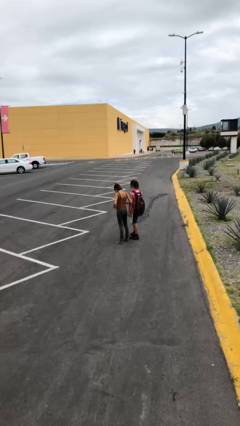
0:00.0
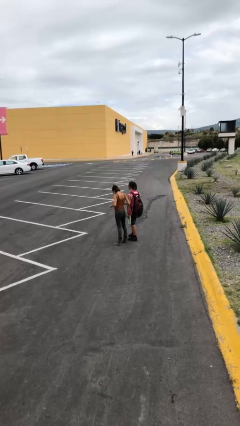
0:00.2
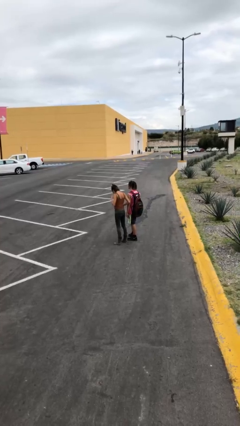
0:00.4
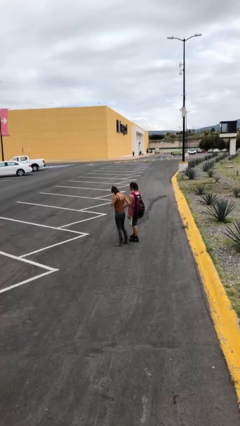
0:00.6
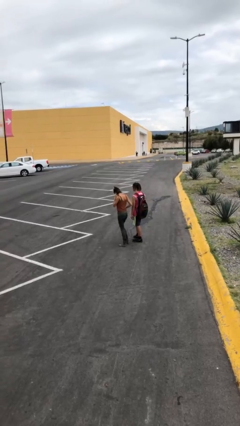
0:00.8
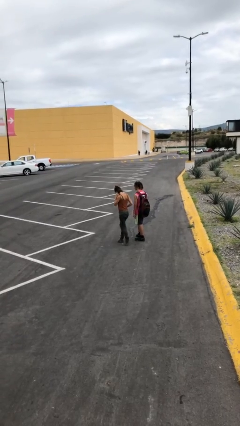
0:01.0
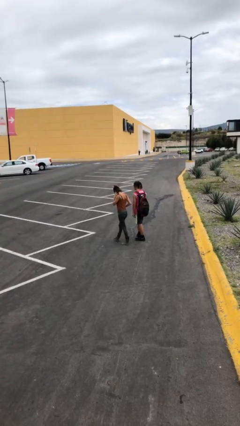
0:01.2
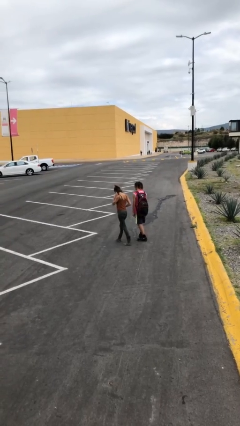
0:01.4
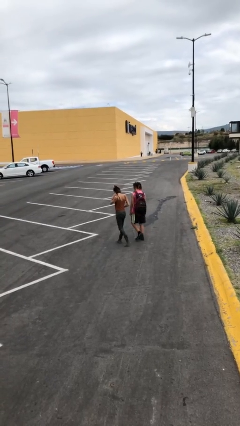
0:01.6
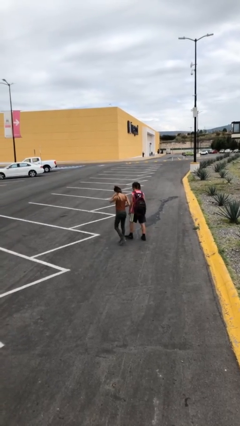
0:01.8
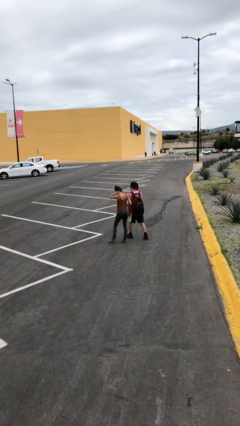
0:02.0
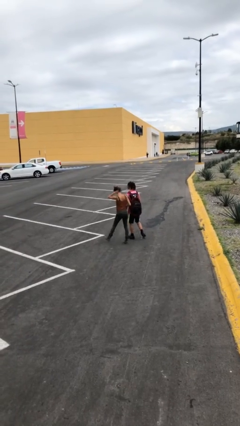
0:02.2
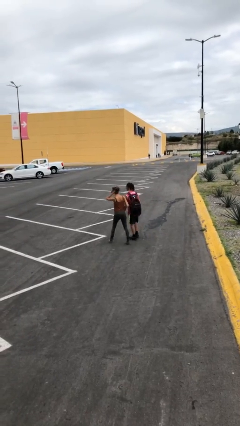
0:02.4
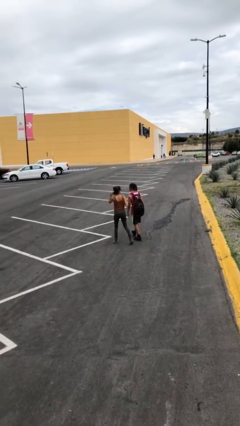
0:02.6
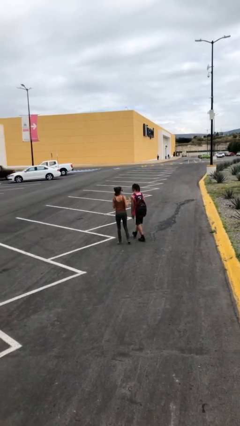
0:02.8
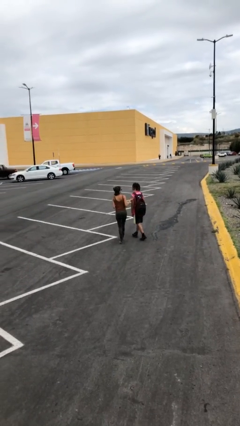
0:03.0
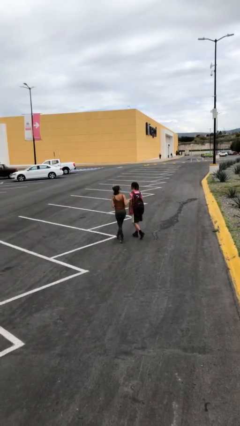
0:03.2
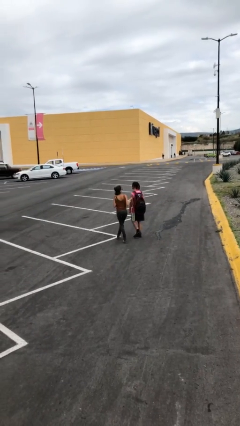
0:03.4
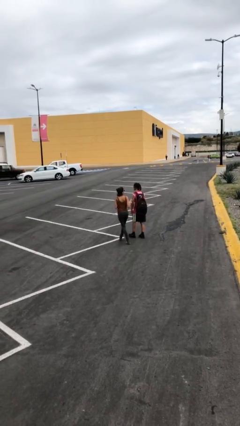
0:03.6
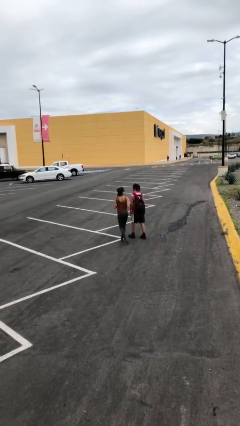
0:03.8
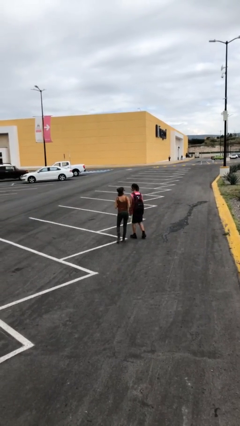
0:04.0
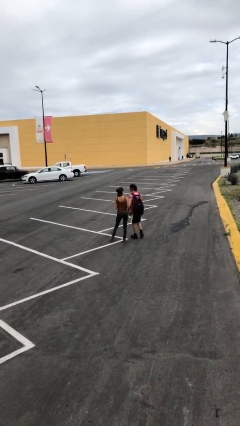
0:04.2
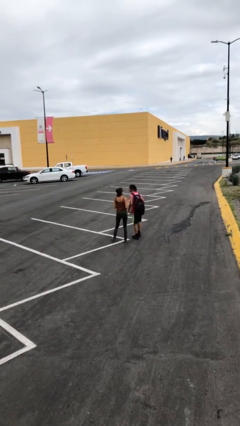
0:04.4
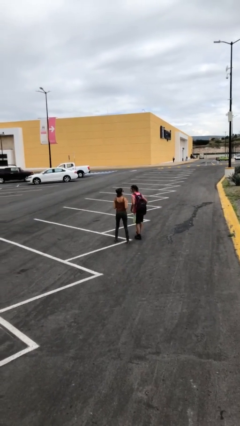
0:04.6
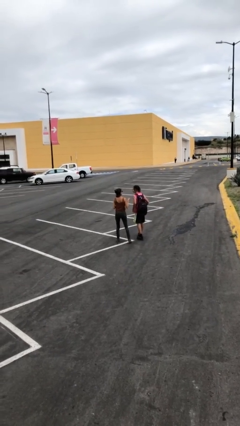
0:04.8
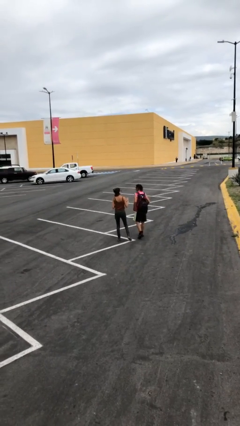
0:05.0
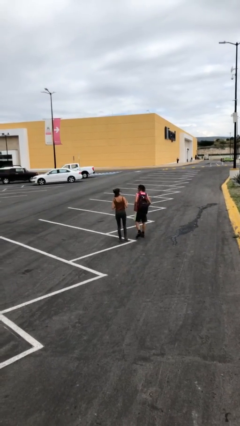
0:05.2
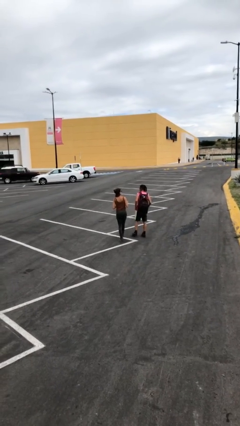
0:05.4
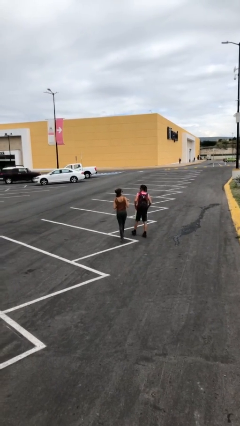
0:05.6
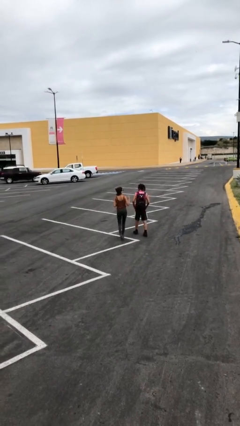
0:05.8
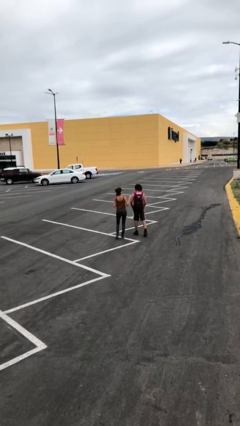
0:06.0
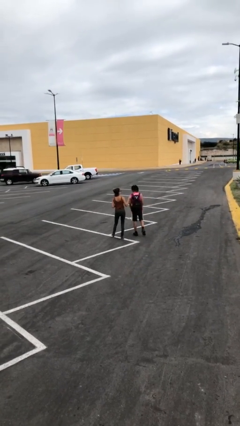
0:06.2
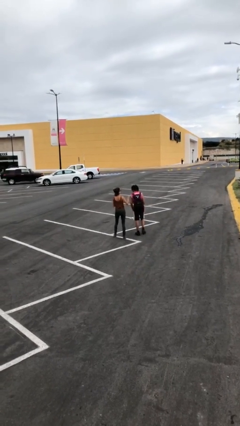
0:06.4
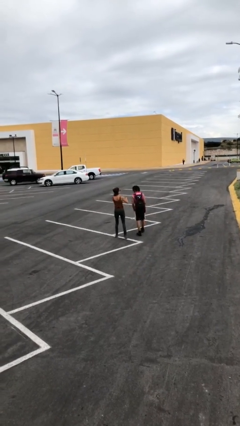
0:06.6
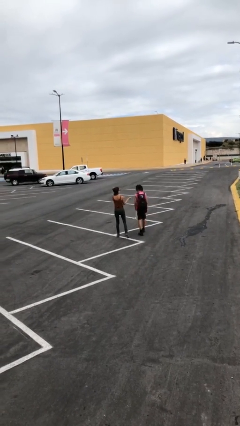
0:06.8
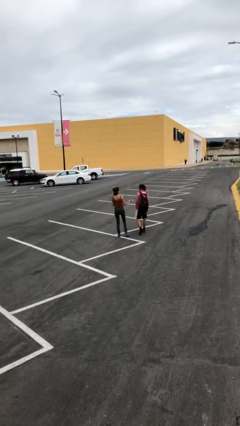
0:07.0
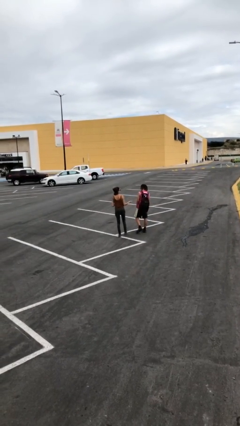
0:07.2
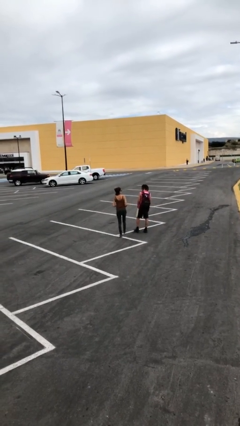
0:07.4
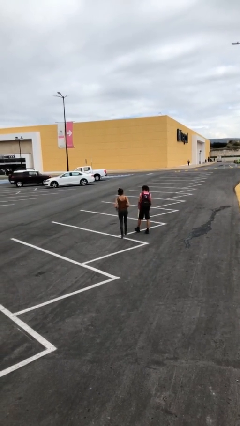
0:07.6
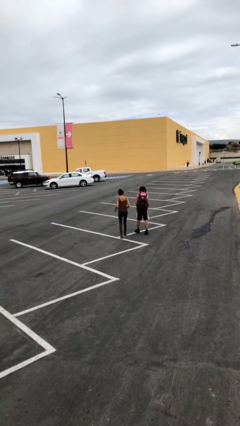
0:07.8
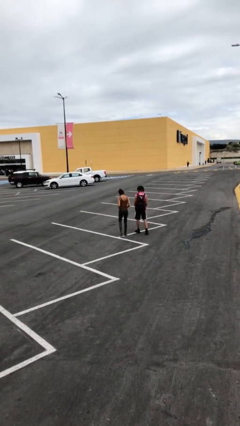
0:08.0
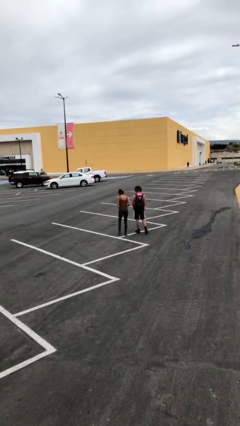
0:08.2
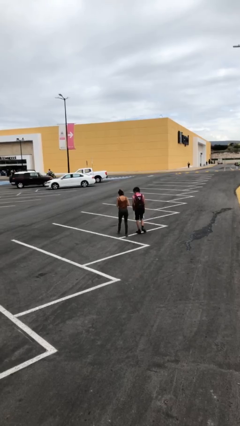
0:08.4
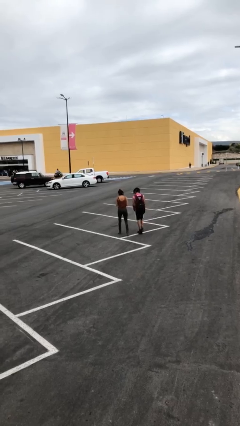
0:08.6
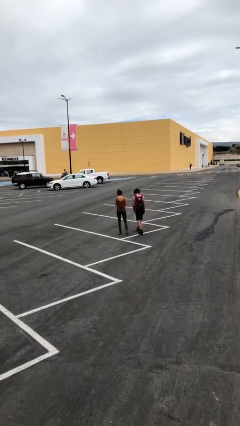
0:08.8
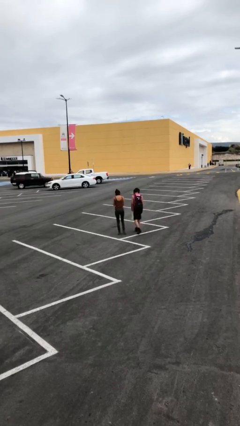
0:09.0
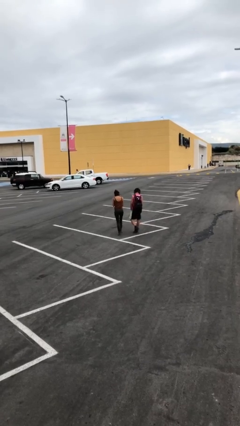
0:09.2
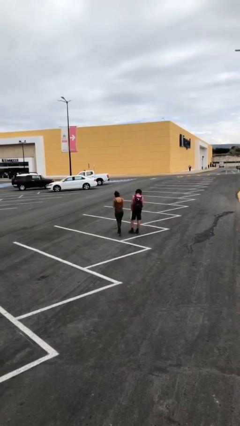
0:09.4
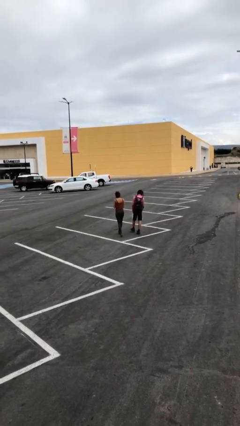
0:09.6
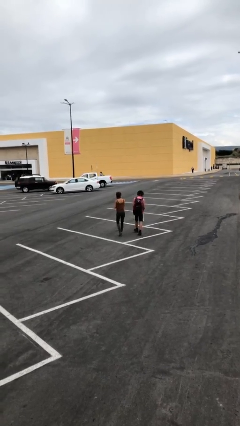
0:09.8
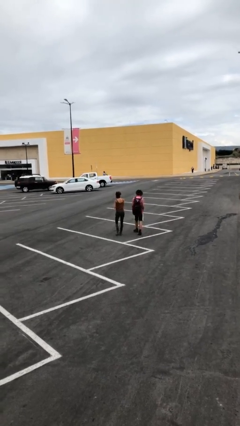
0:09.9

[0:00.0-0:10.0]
person talks to person

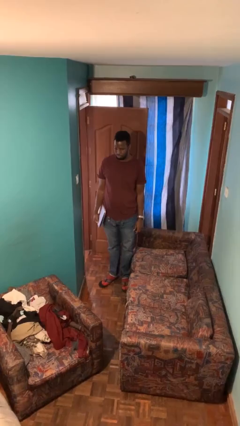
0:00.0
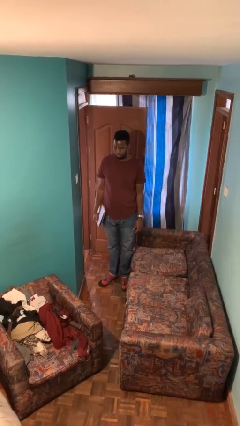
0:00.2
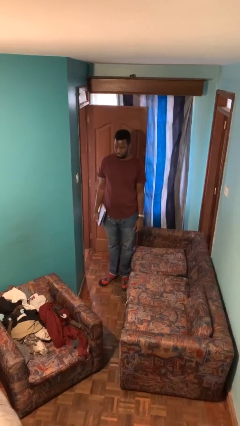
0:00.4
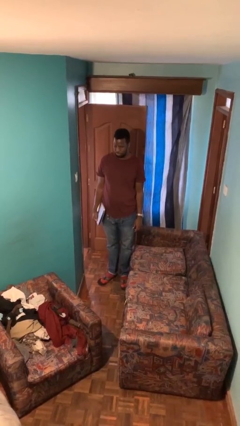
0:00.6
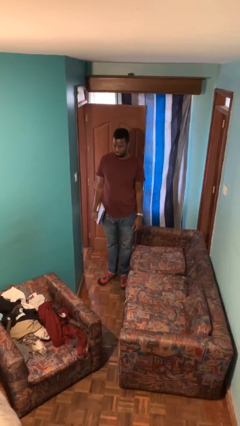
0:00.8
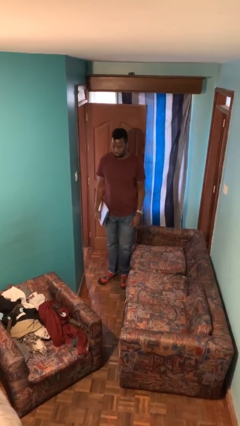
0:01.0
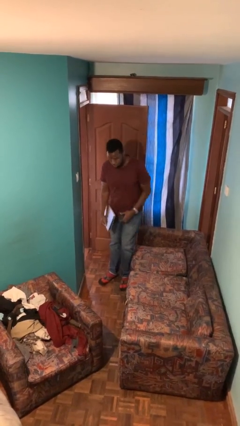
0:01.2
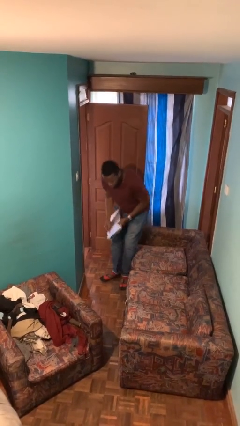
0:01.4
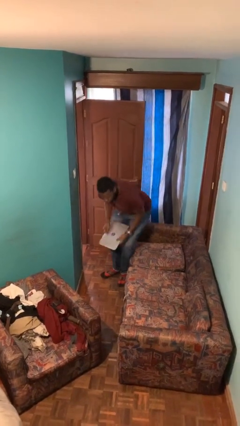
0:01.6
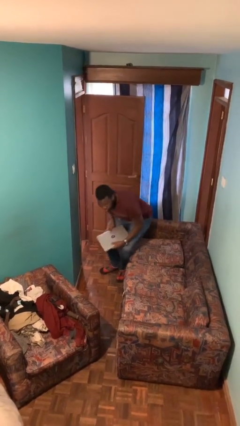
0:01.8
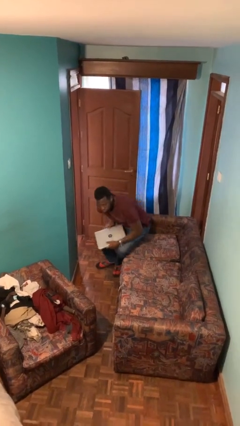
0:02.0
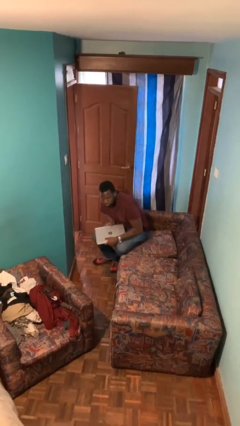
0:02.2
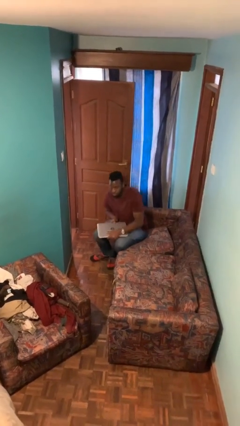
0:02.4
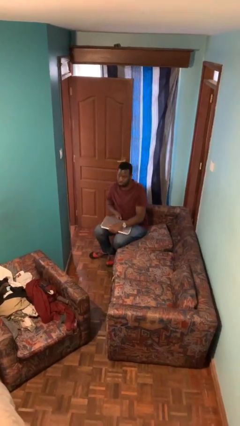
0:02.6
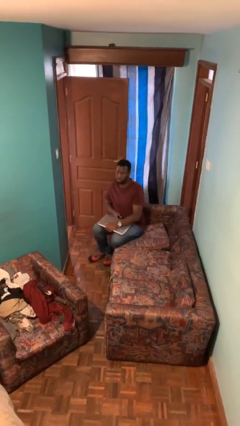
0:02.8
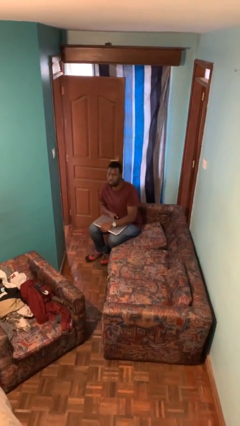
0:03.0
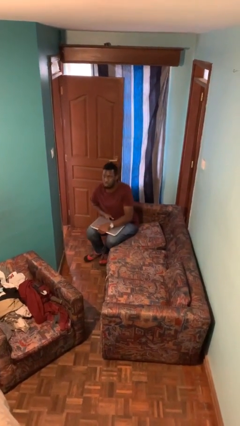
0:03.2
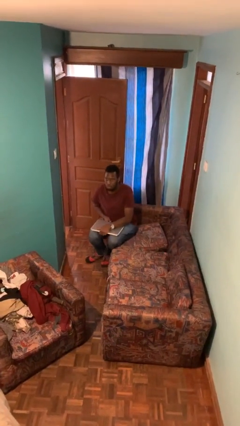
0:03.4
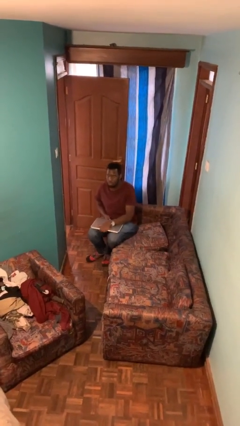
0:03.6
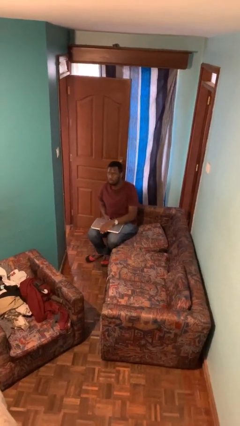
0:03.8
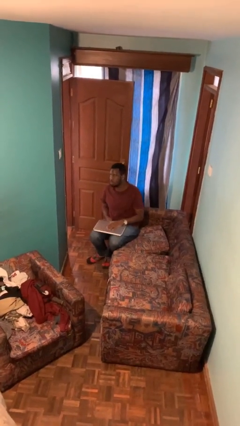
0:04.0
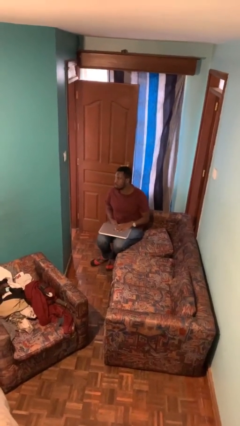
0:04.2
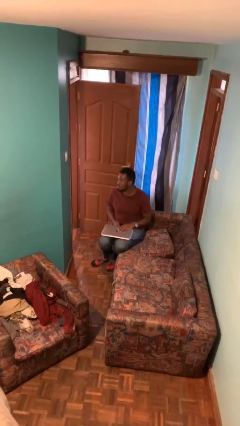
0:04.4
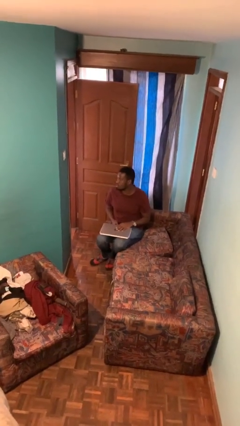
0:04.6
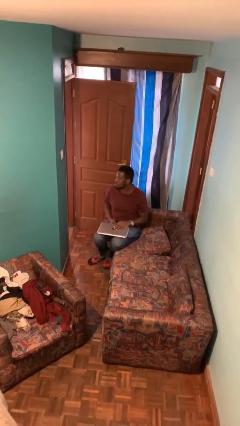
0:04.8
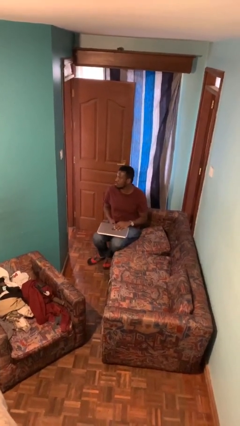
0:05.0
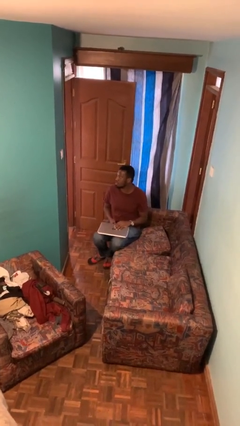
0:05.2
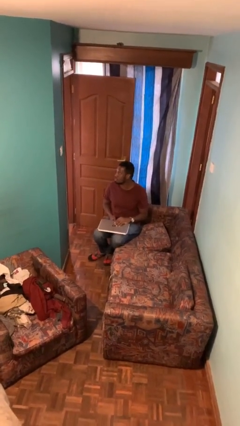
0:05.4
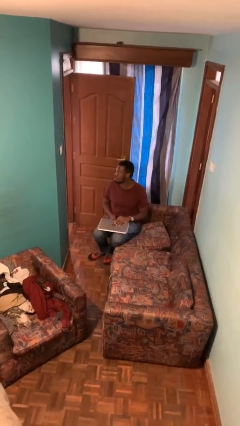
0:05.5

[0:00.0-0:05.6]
person sits down

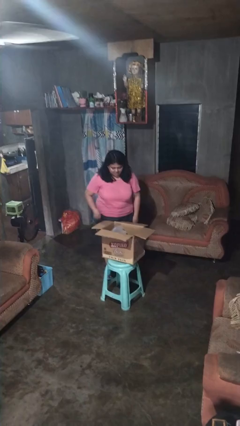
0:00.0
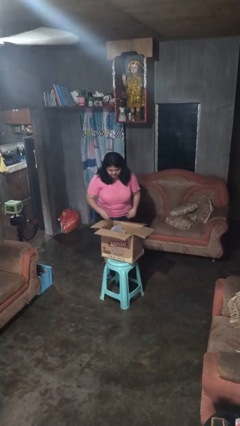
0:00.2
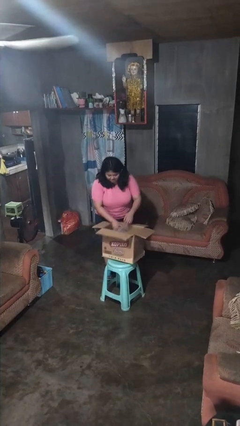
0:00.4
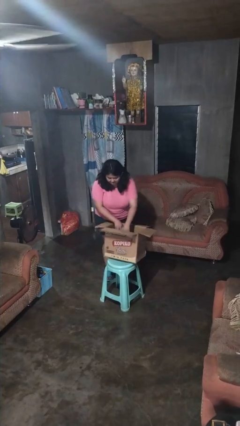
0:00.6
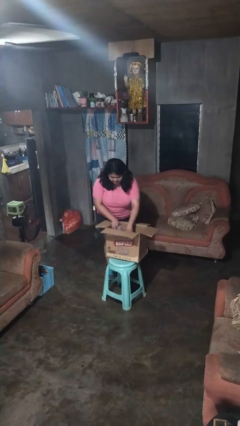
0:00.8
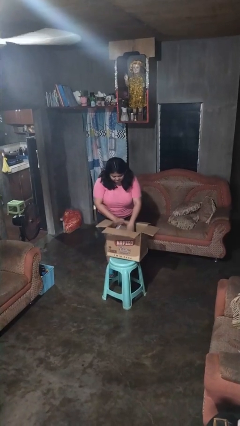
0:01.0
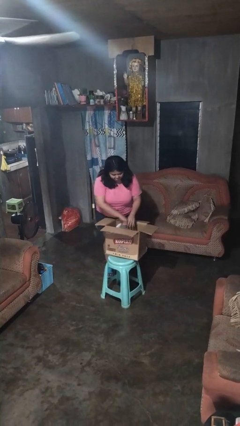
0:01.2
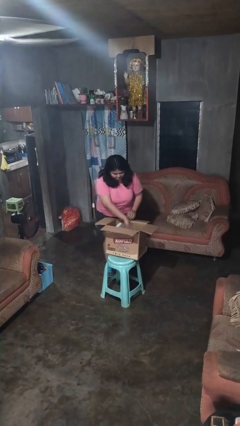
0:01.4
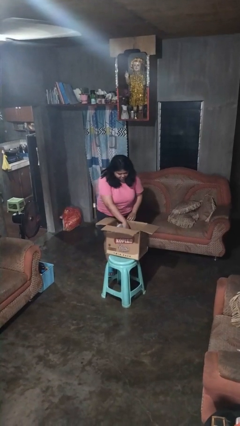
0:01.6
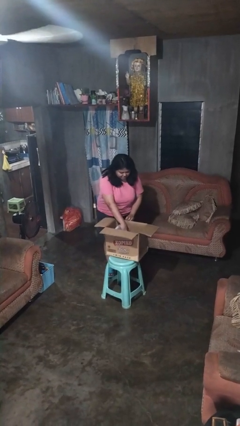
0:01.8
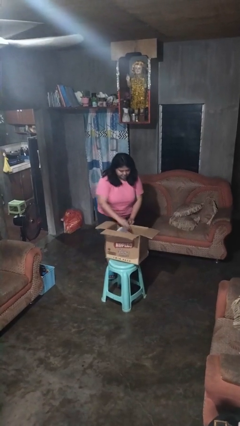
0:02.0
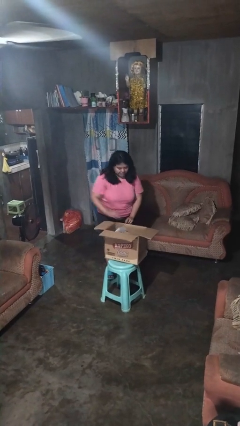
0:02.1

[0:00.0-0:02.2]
person searches in box
